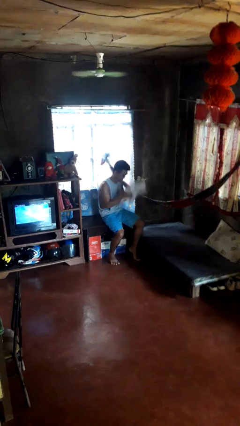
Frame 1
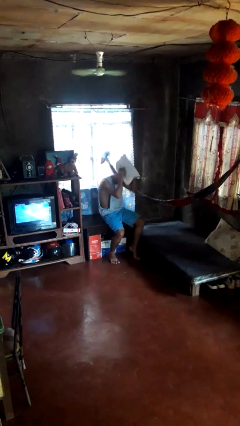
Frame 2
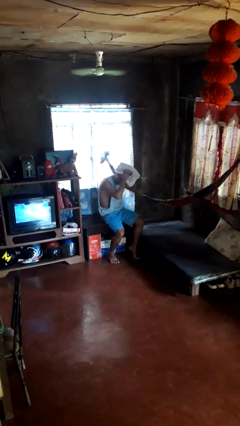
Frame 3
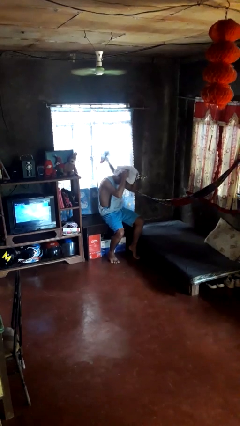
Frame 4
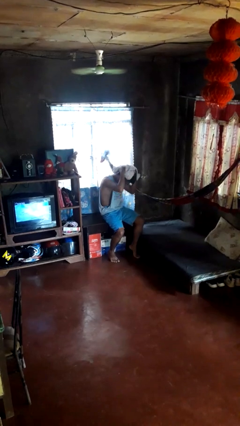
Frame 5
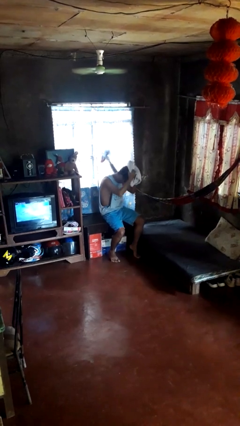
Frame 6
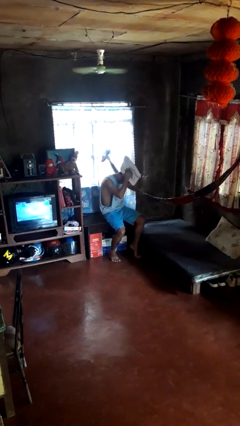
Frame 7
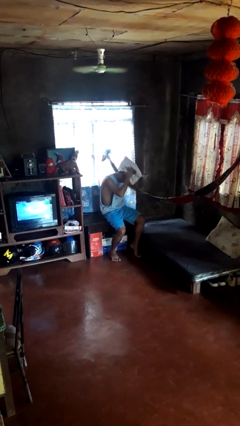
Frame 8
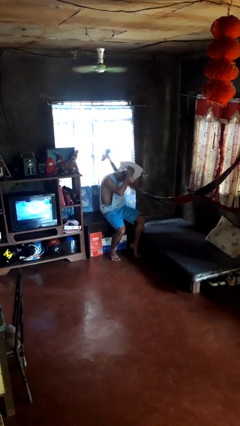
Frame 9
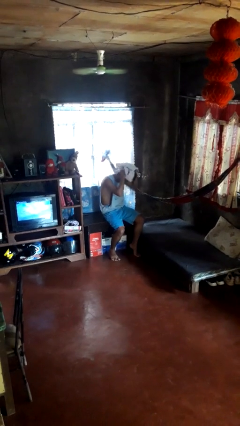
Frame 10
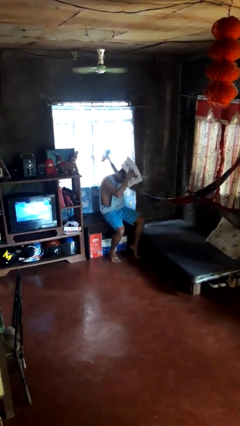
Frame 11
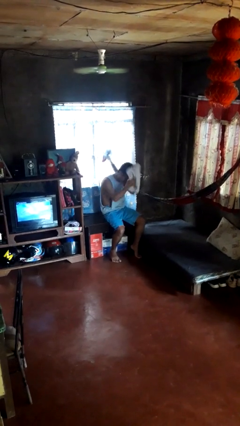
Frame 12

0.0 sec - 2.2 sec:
person dries hair with towel

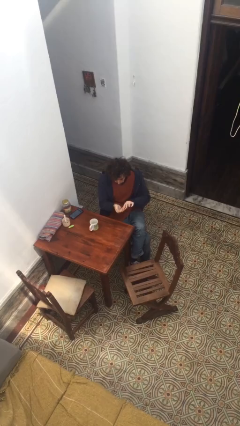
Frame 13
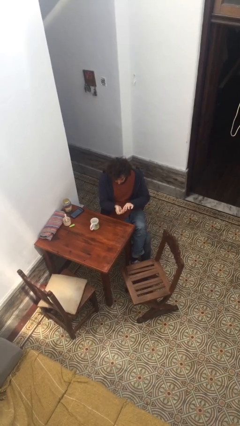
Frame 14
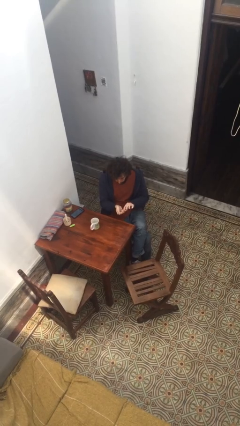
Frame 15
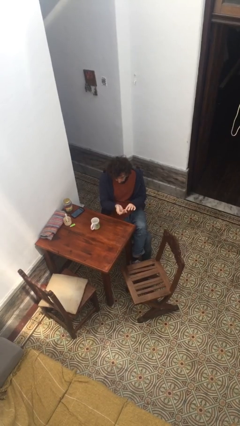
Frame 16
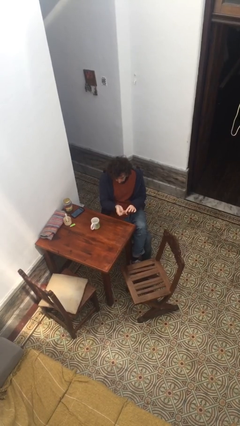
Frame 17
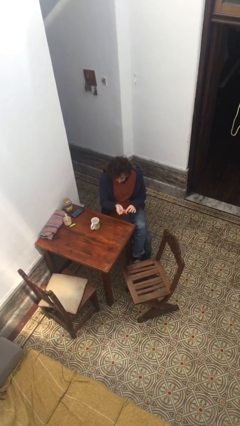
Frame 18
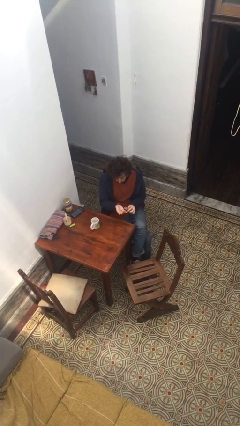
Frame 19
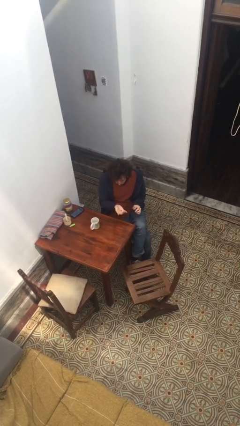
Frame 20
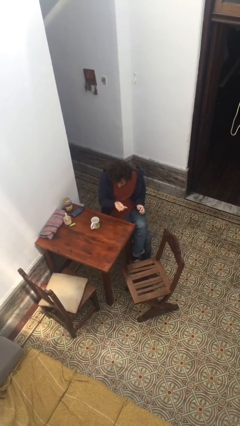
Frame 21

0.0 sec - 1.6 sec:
person takes medicine pills

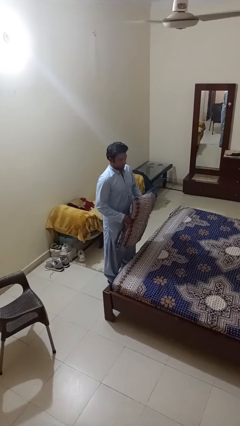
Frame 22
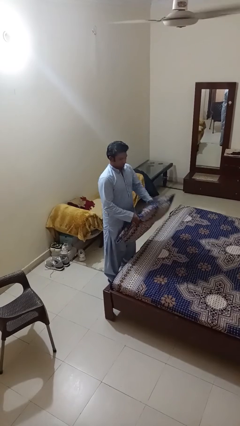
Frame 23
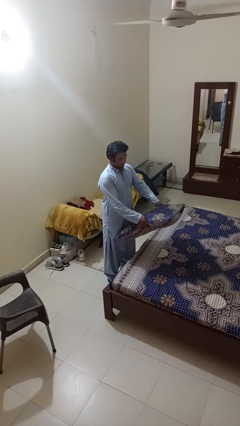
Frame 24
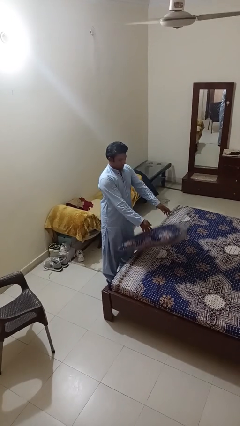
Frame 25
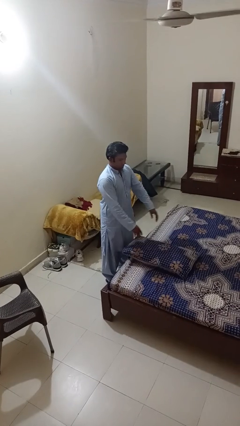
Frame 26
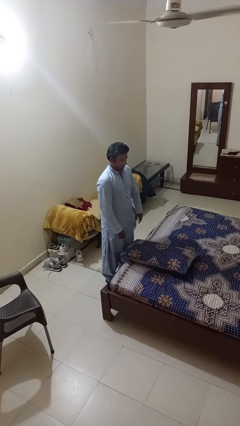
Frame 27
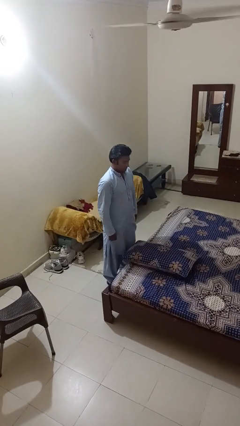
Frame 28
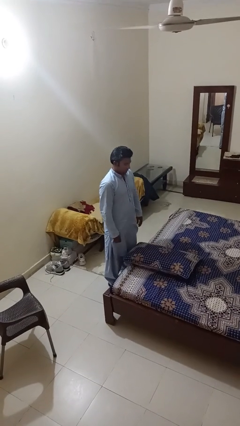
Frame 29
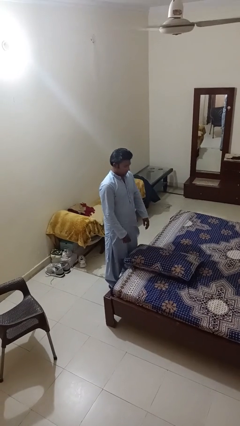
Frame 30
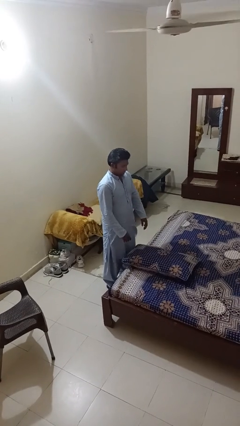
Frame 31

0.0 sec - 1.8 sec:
person puts down object on bed

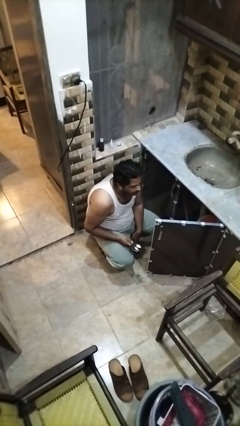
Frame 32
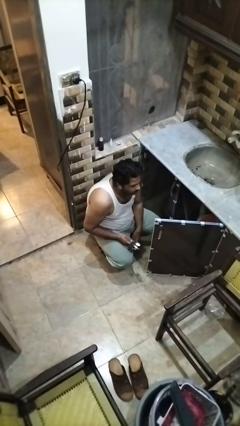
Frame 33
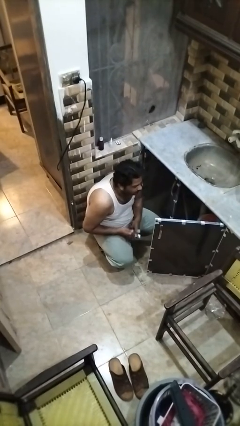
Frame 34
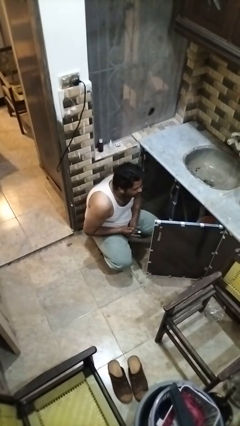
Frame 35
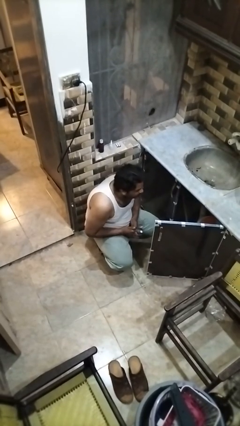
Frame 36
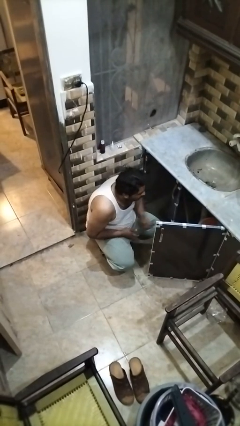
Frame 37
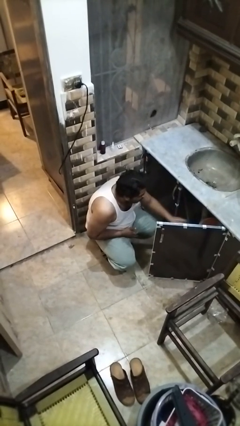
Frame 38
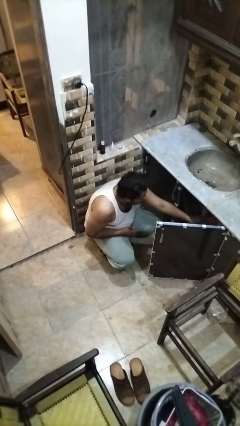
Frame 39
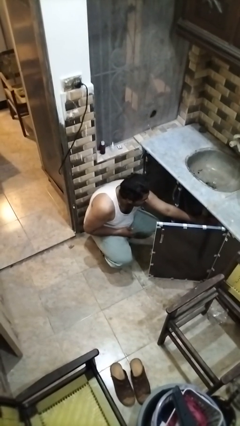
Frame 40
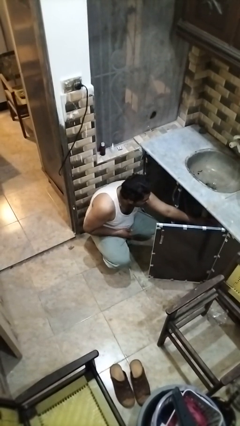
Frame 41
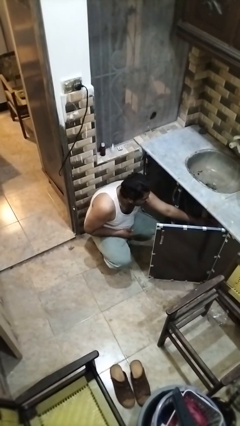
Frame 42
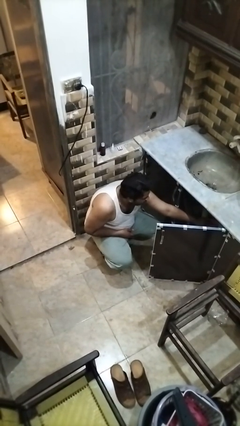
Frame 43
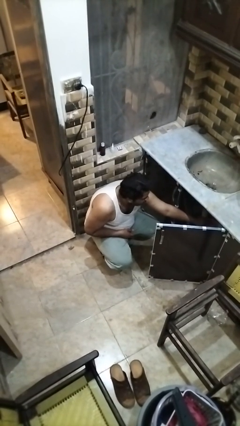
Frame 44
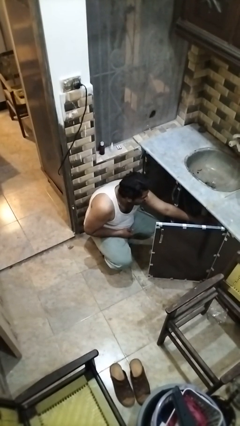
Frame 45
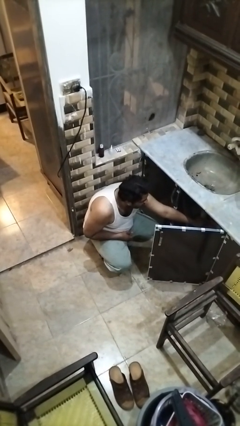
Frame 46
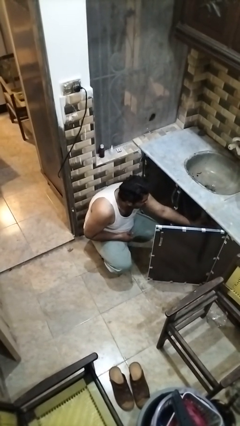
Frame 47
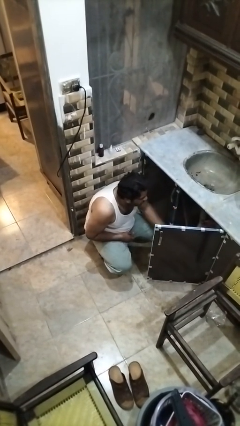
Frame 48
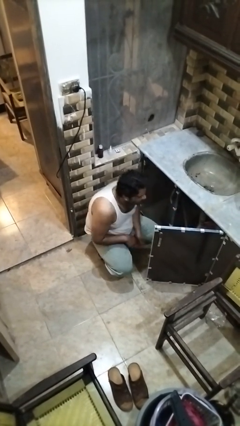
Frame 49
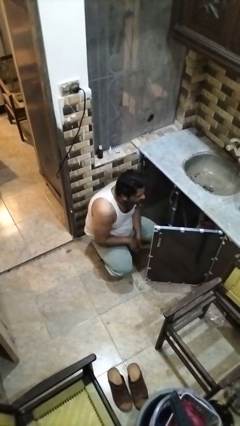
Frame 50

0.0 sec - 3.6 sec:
person puts object into kitchen drawer

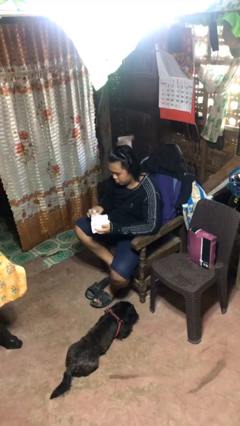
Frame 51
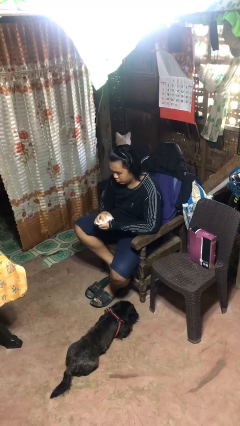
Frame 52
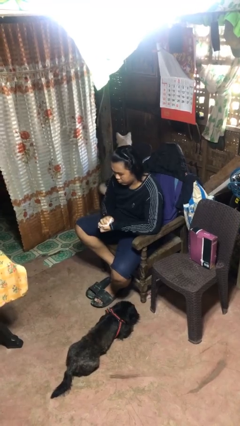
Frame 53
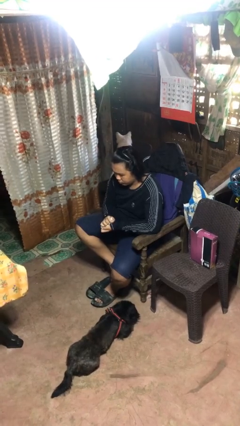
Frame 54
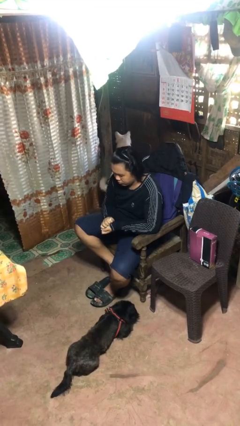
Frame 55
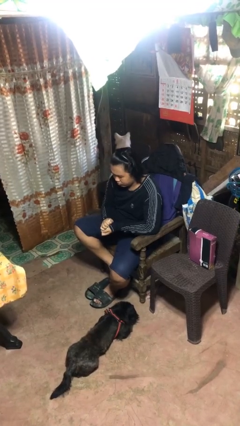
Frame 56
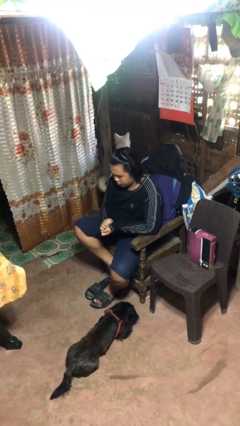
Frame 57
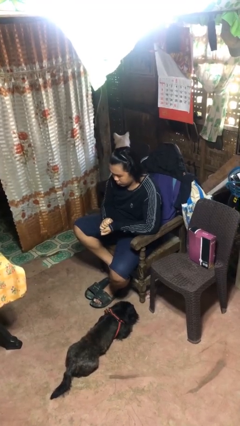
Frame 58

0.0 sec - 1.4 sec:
person crumples paper

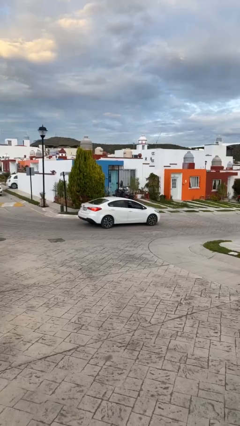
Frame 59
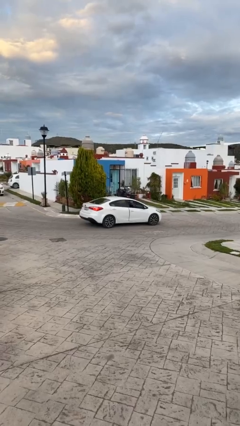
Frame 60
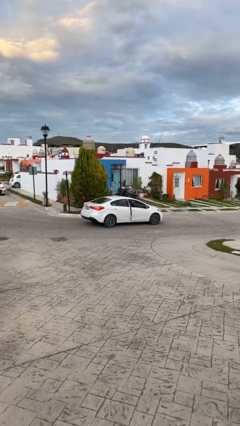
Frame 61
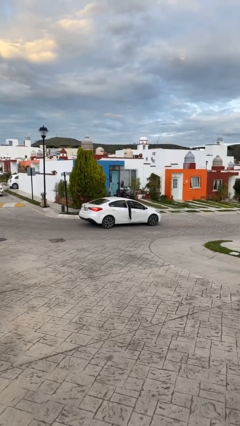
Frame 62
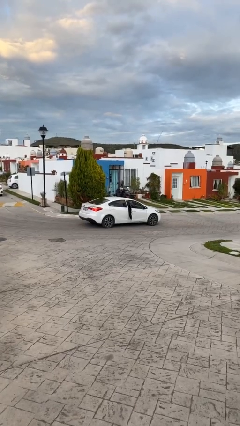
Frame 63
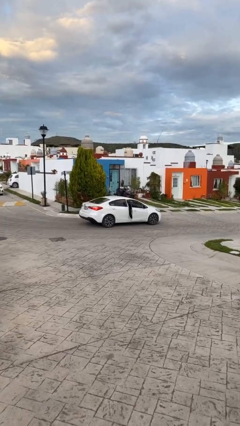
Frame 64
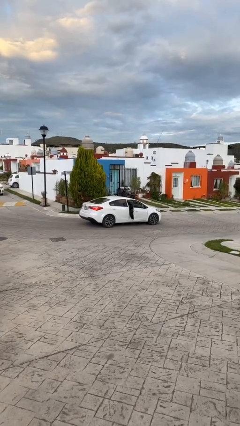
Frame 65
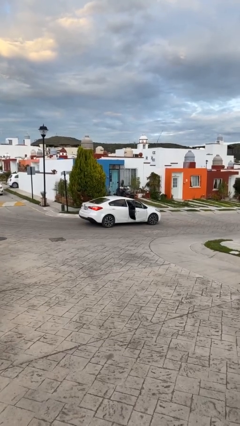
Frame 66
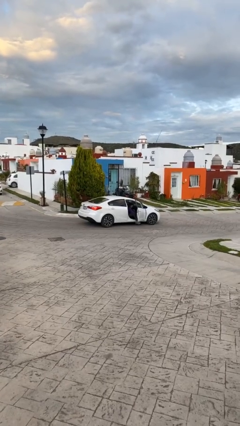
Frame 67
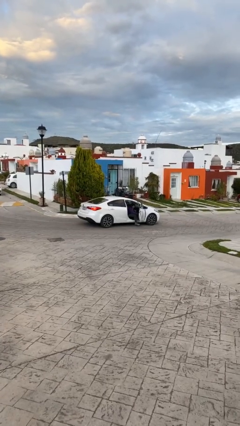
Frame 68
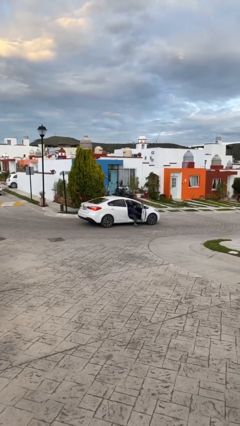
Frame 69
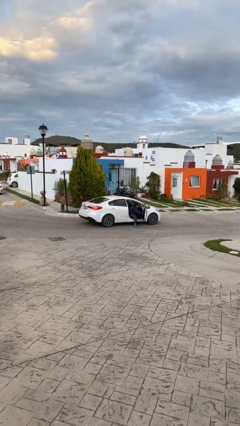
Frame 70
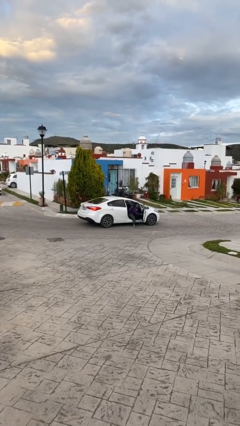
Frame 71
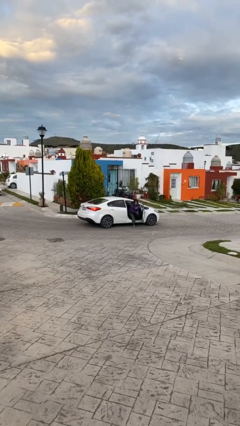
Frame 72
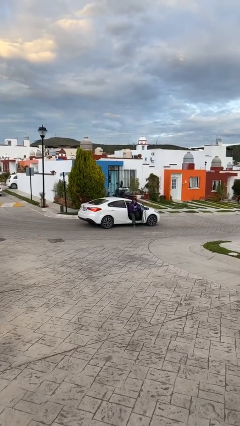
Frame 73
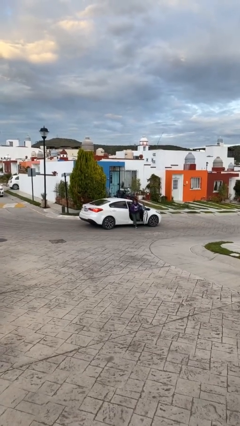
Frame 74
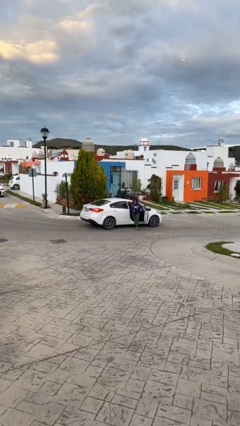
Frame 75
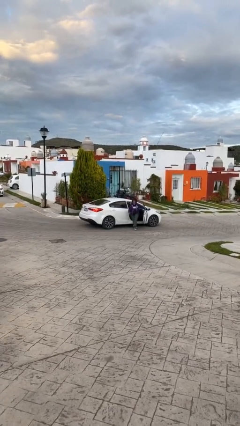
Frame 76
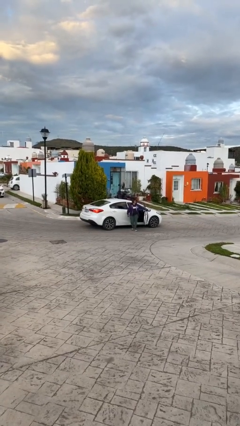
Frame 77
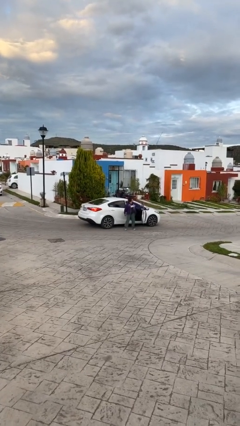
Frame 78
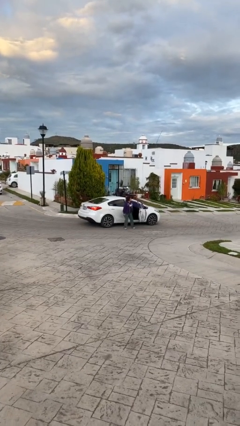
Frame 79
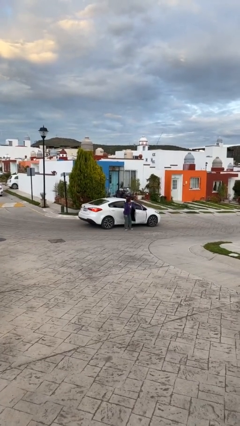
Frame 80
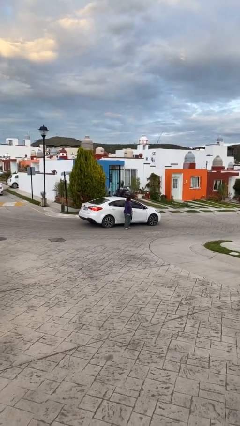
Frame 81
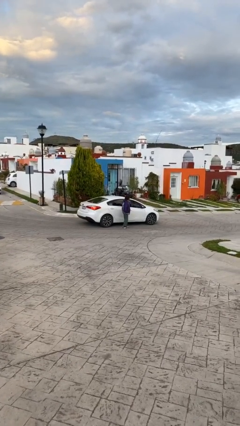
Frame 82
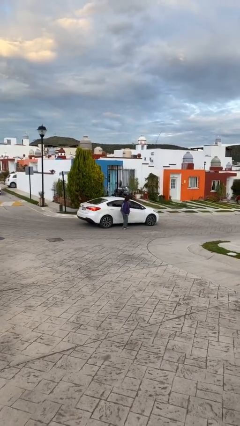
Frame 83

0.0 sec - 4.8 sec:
car drops off person

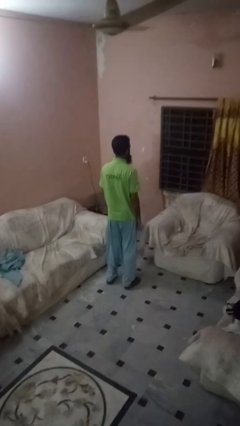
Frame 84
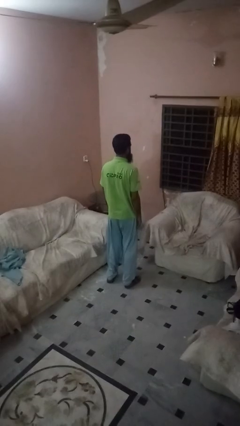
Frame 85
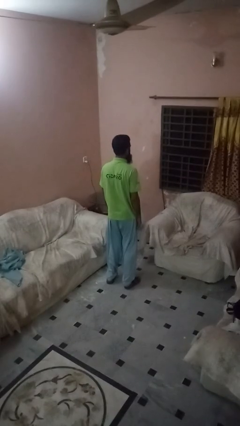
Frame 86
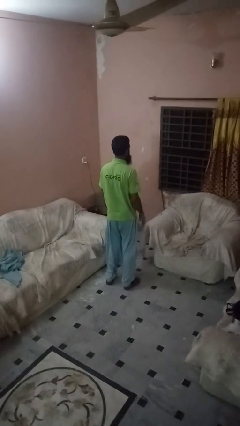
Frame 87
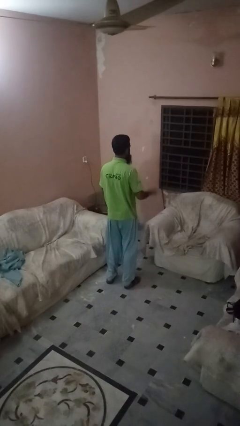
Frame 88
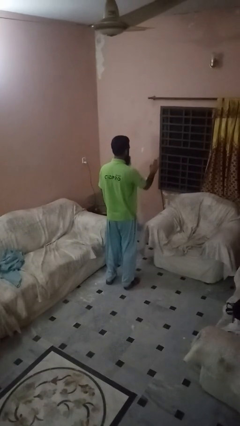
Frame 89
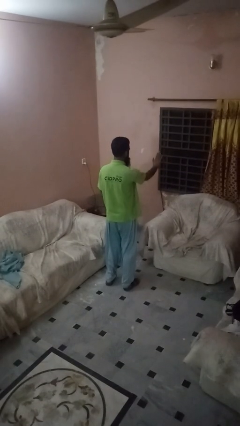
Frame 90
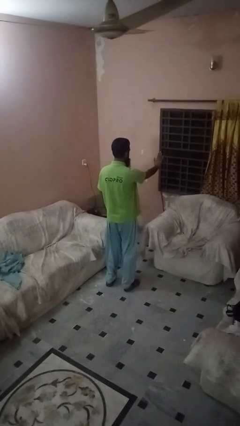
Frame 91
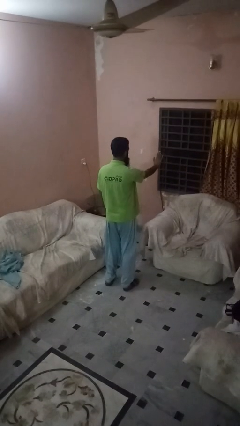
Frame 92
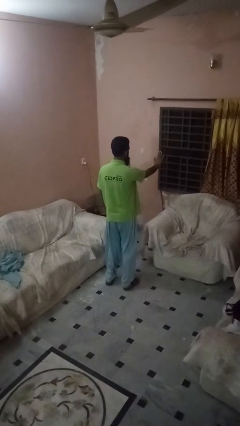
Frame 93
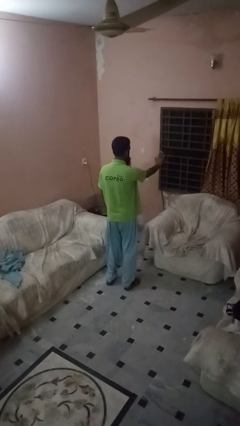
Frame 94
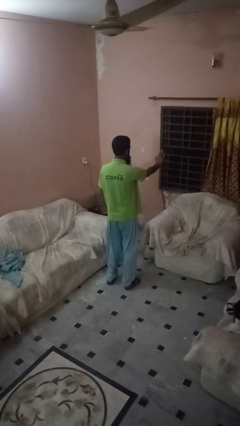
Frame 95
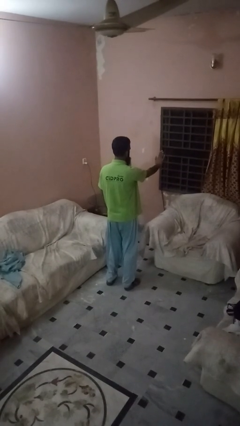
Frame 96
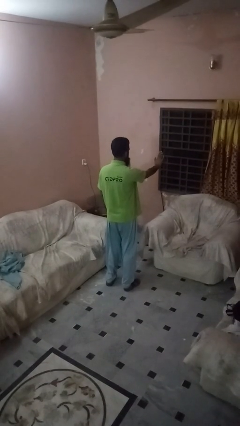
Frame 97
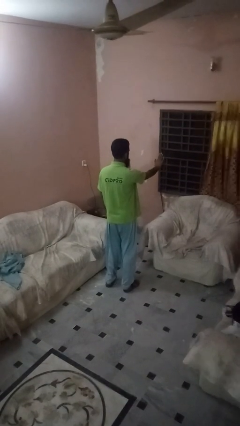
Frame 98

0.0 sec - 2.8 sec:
person gestures stop
